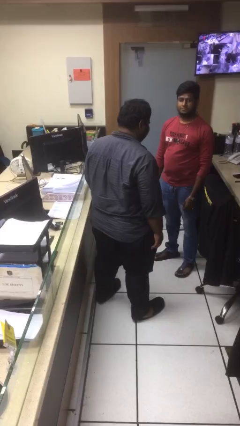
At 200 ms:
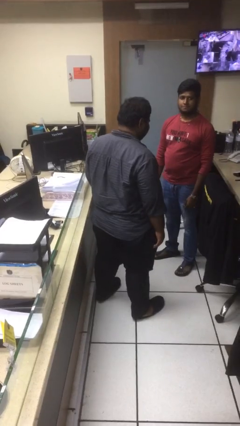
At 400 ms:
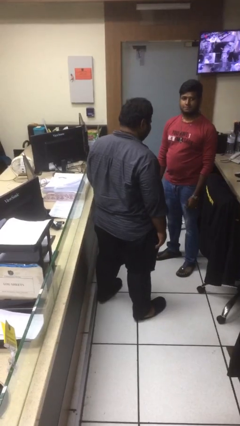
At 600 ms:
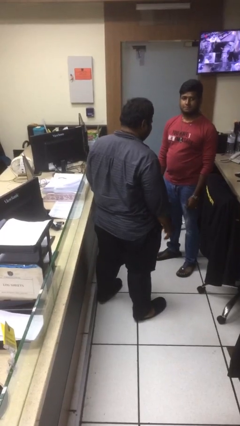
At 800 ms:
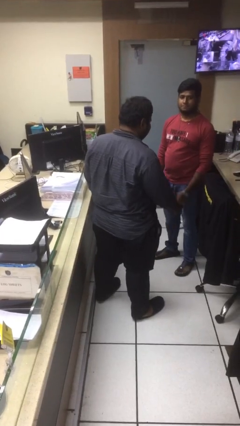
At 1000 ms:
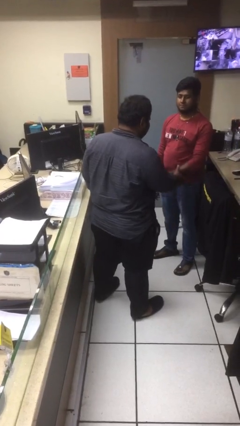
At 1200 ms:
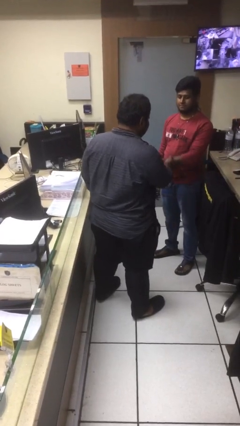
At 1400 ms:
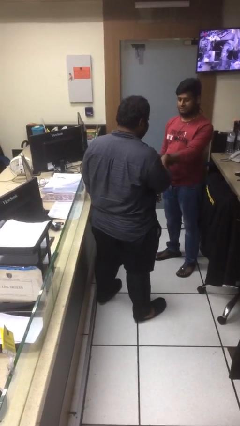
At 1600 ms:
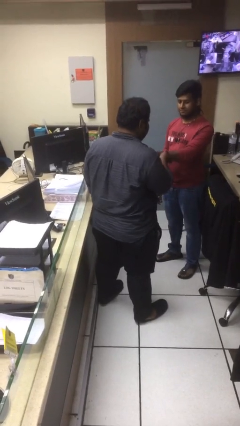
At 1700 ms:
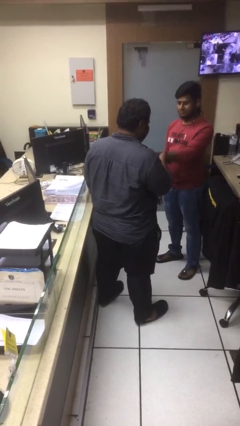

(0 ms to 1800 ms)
person grabs person by forearm

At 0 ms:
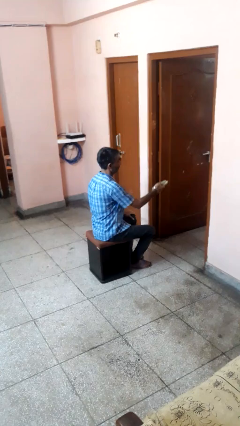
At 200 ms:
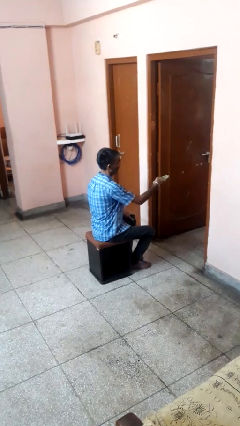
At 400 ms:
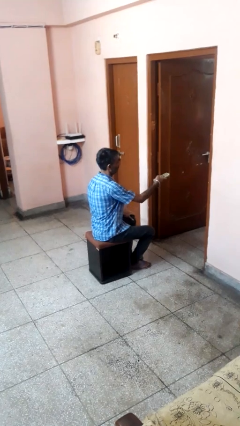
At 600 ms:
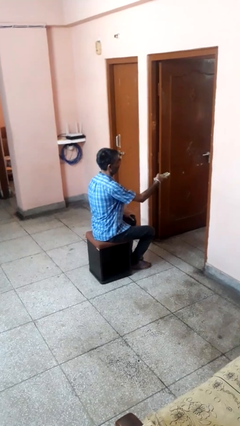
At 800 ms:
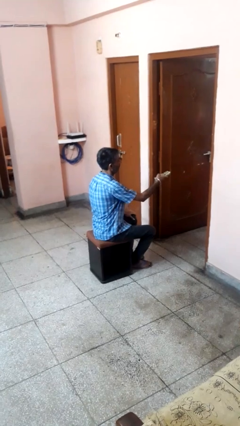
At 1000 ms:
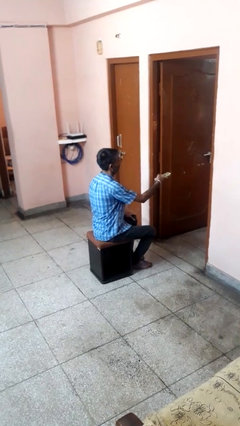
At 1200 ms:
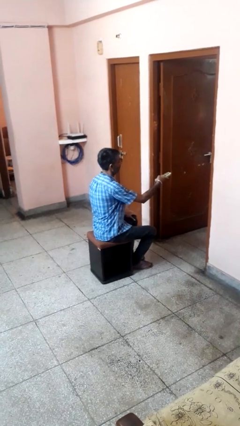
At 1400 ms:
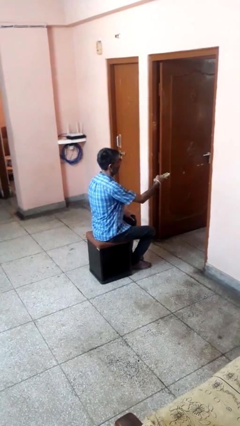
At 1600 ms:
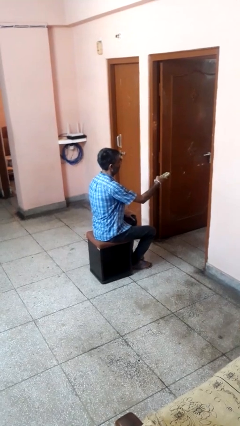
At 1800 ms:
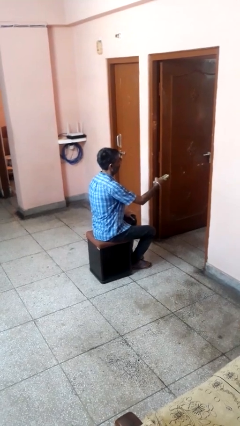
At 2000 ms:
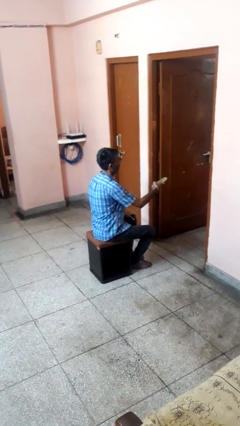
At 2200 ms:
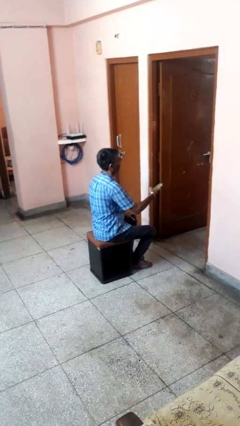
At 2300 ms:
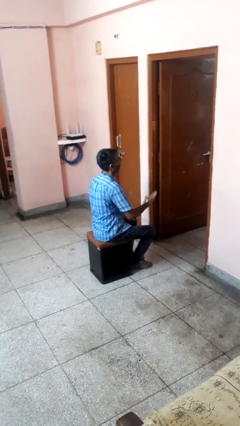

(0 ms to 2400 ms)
person uses television remote

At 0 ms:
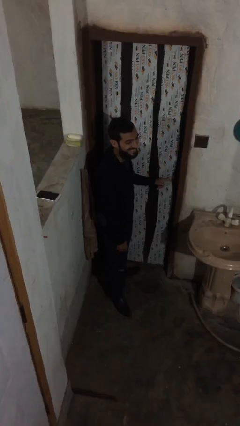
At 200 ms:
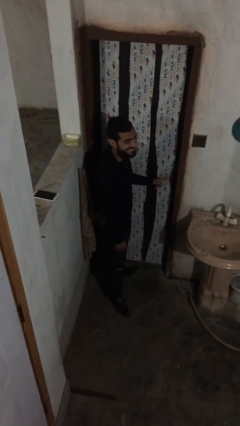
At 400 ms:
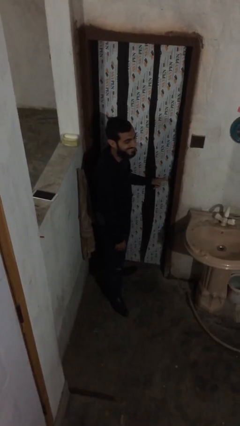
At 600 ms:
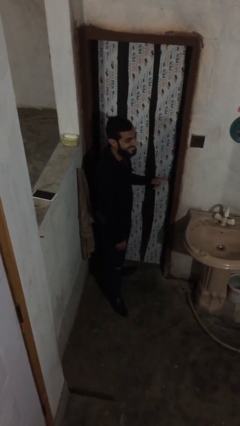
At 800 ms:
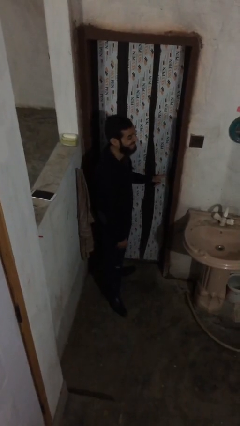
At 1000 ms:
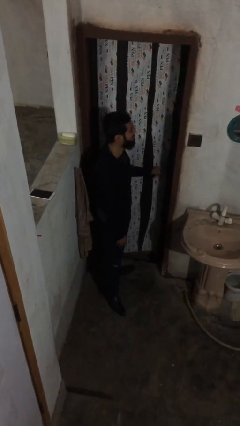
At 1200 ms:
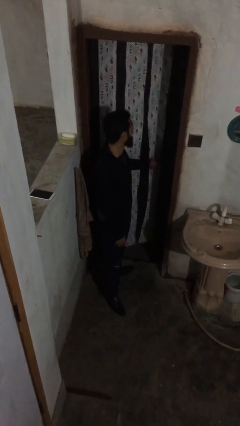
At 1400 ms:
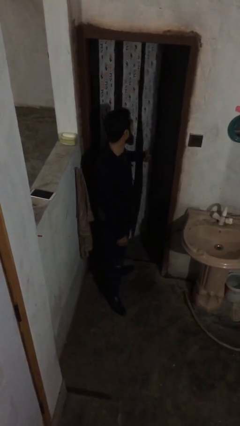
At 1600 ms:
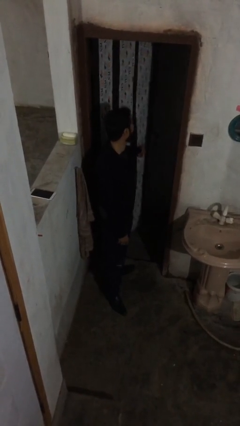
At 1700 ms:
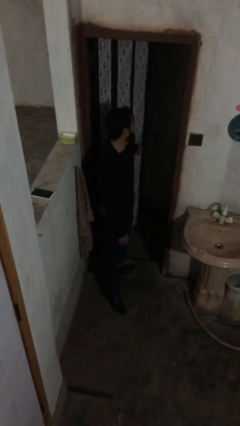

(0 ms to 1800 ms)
person opens facility door

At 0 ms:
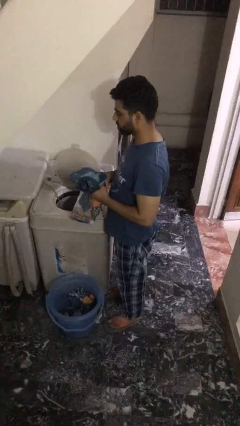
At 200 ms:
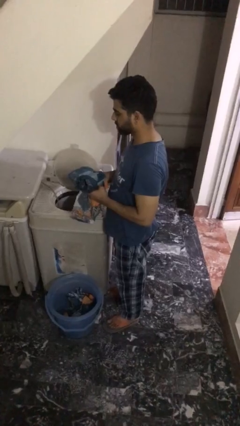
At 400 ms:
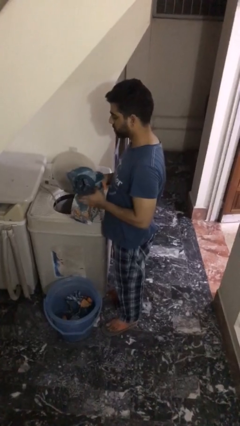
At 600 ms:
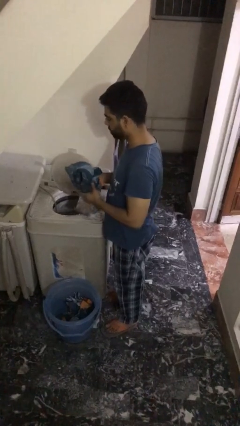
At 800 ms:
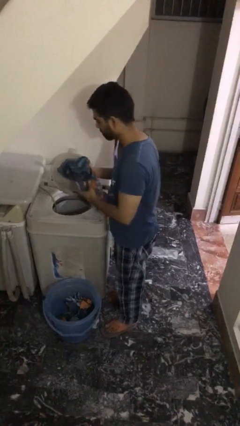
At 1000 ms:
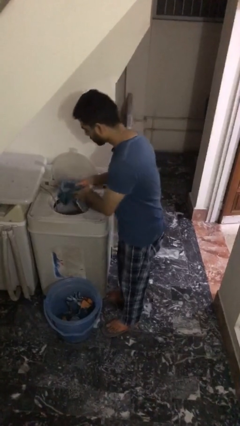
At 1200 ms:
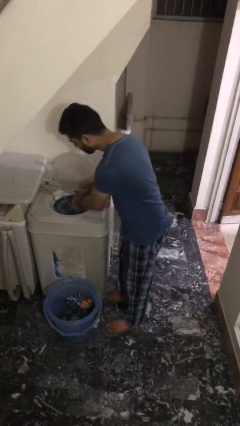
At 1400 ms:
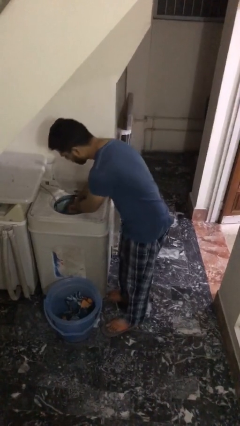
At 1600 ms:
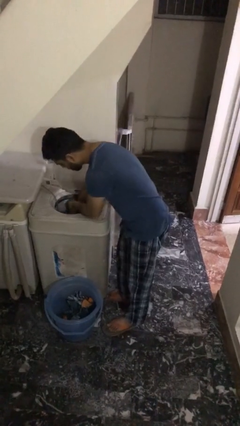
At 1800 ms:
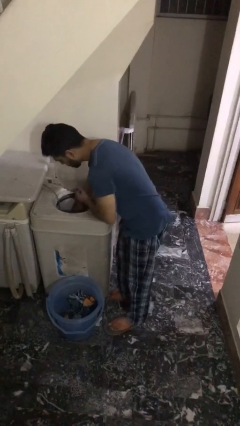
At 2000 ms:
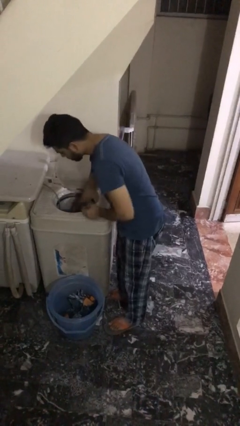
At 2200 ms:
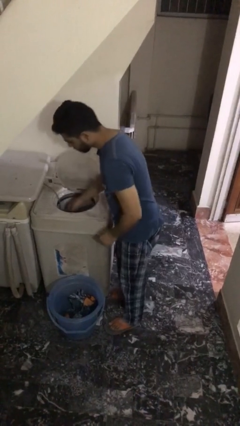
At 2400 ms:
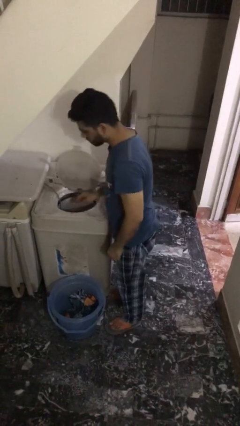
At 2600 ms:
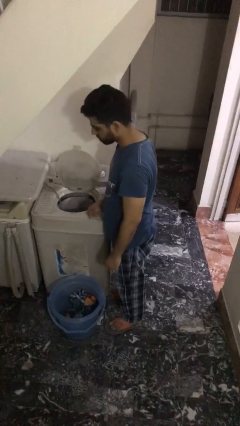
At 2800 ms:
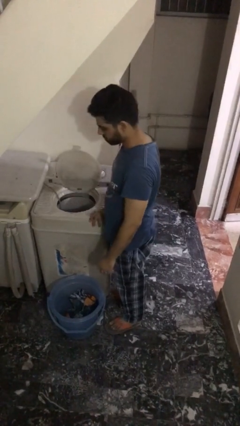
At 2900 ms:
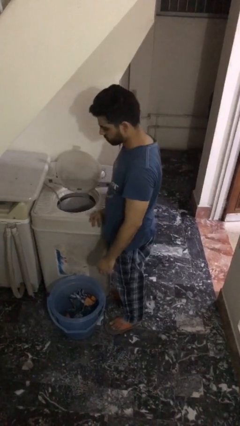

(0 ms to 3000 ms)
person loads clotheswasher

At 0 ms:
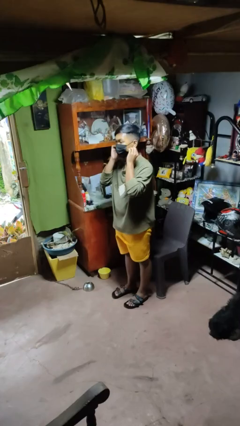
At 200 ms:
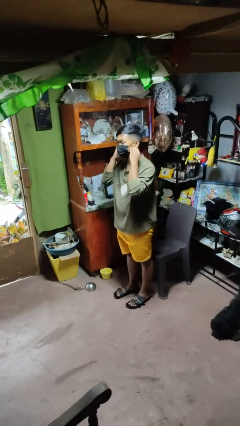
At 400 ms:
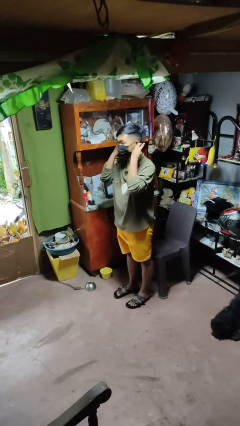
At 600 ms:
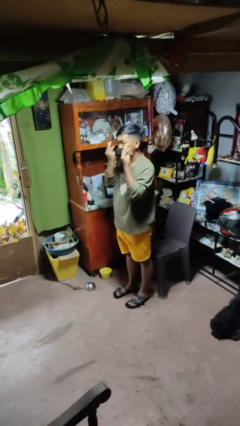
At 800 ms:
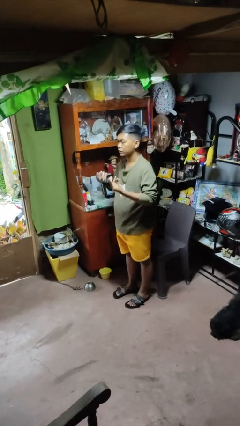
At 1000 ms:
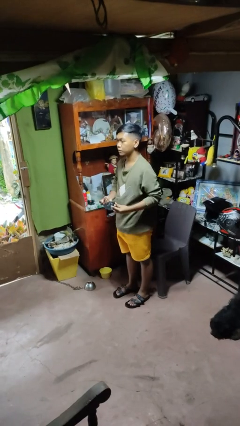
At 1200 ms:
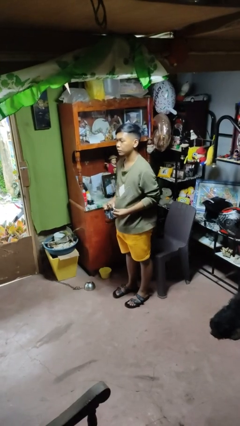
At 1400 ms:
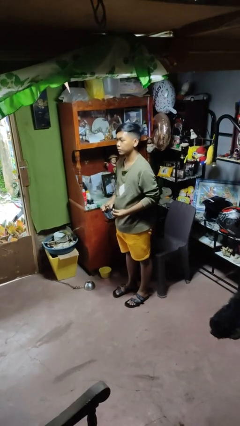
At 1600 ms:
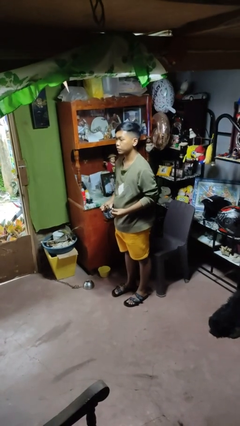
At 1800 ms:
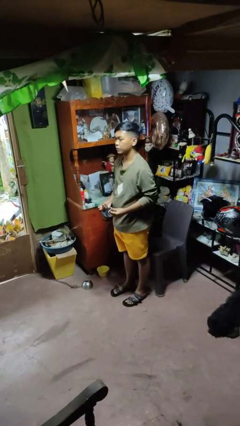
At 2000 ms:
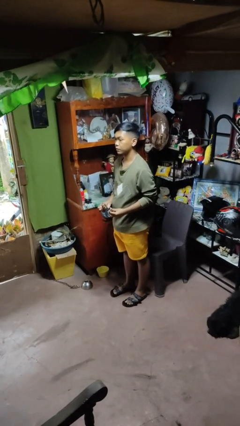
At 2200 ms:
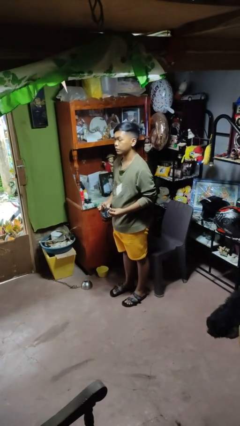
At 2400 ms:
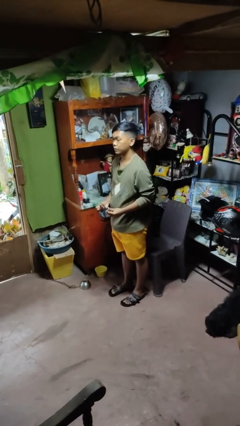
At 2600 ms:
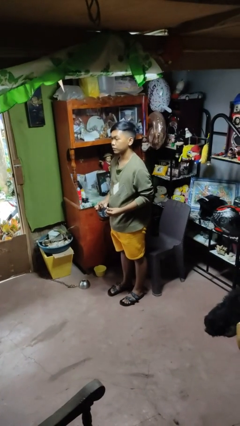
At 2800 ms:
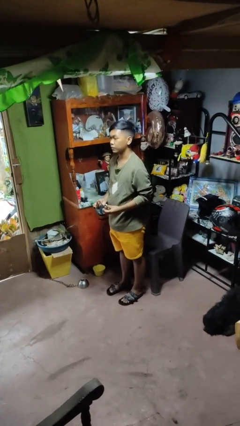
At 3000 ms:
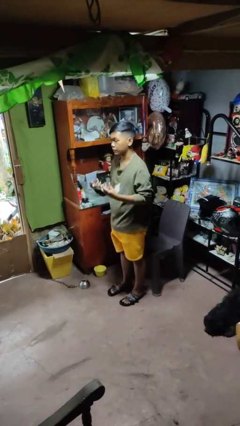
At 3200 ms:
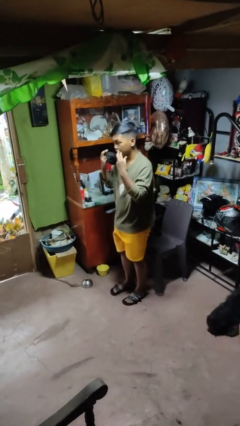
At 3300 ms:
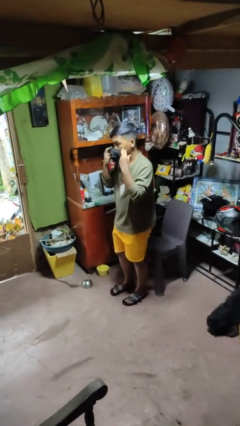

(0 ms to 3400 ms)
person takes off facemask

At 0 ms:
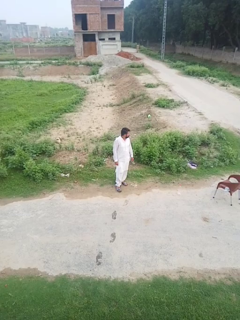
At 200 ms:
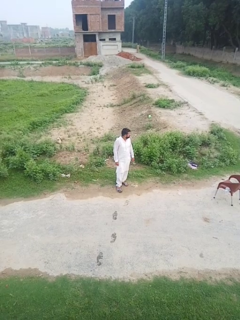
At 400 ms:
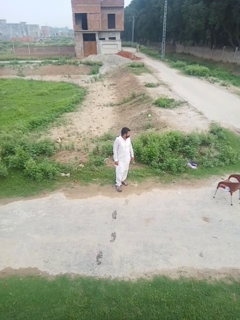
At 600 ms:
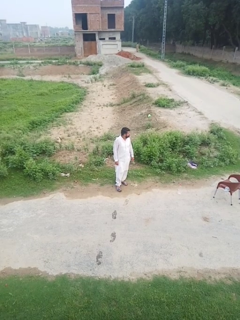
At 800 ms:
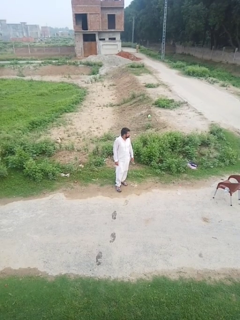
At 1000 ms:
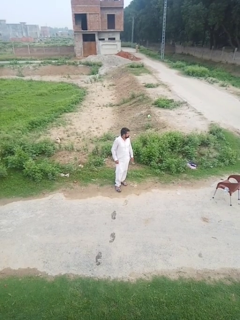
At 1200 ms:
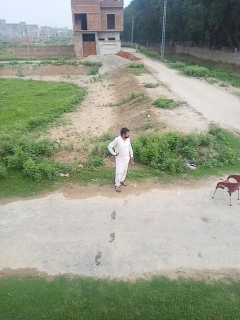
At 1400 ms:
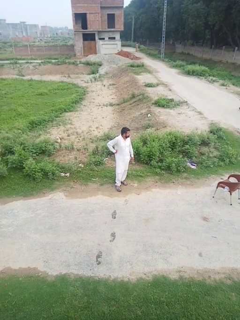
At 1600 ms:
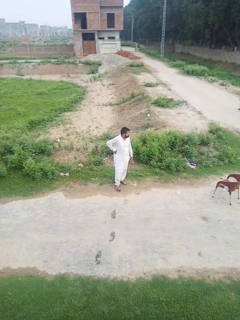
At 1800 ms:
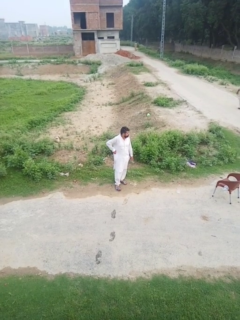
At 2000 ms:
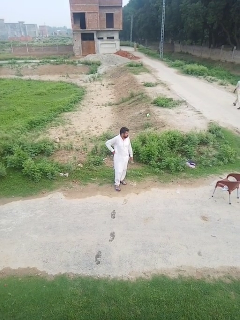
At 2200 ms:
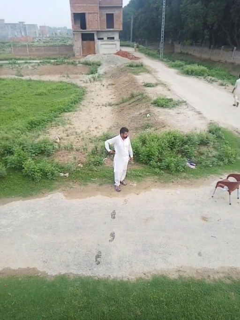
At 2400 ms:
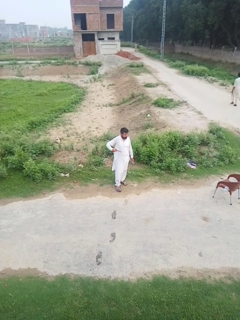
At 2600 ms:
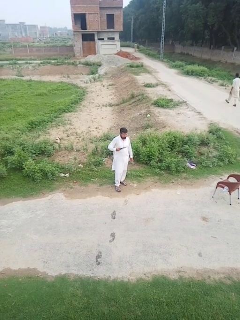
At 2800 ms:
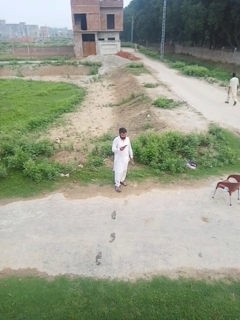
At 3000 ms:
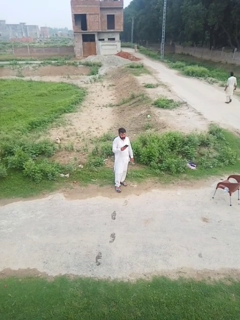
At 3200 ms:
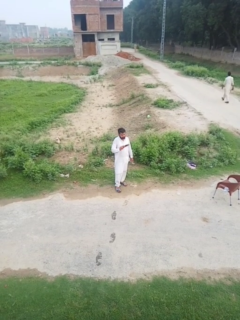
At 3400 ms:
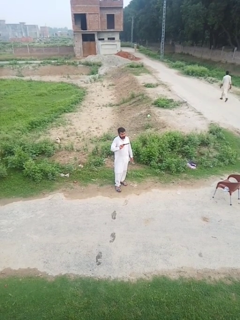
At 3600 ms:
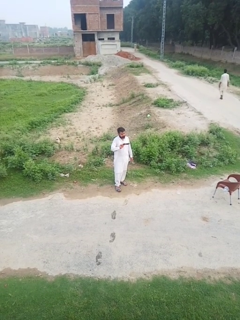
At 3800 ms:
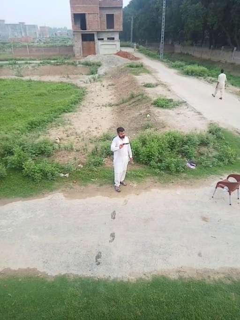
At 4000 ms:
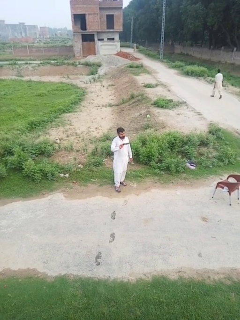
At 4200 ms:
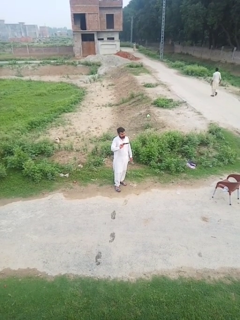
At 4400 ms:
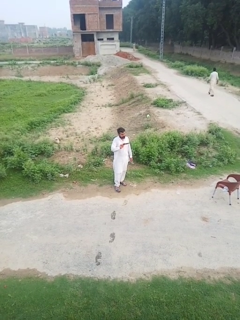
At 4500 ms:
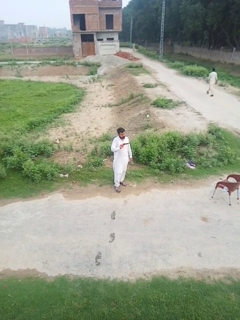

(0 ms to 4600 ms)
person takes phone from pocket

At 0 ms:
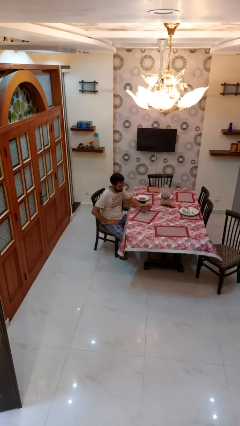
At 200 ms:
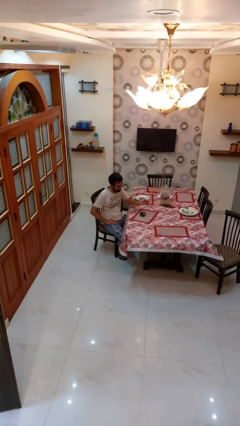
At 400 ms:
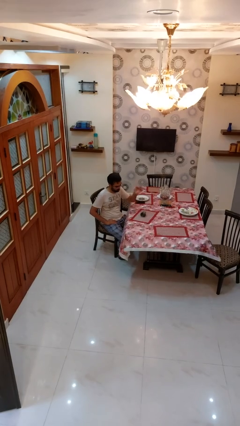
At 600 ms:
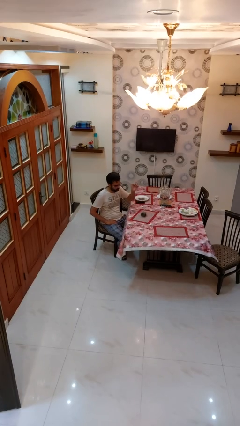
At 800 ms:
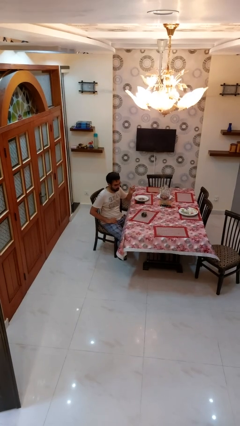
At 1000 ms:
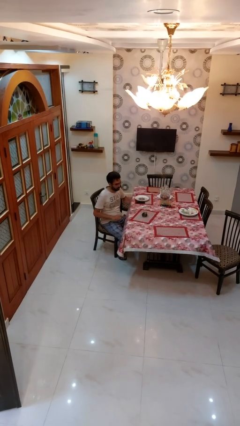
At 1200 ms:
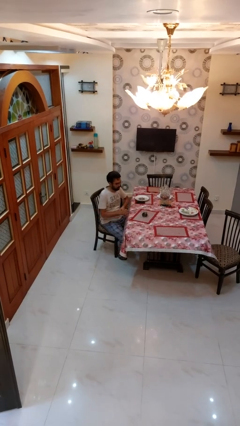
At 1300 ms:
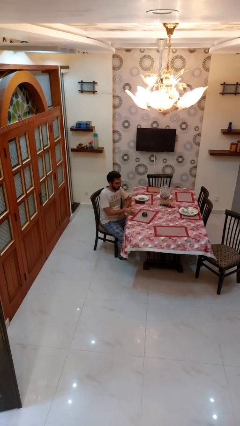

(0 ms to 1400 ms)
person knocks over glass
